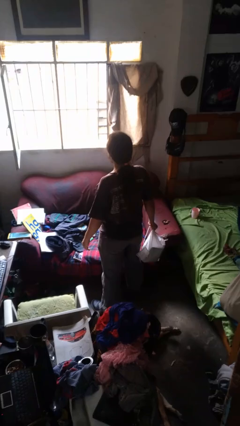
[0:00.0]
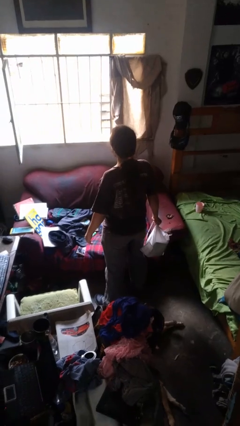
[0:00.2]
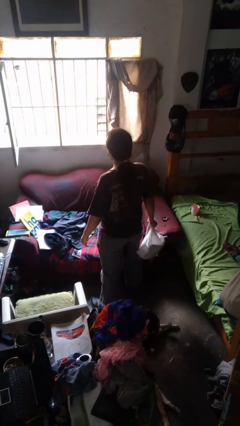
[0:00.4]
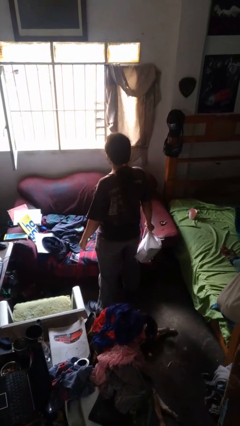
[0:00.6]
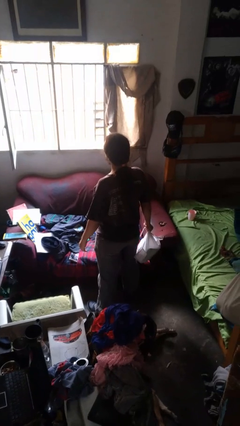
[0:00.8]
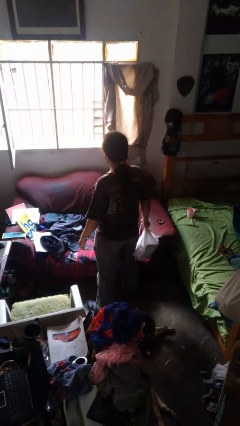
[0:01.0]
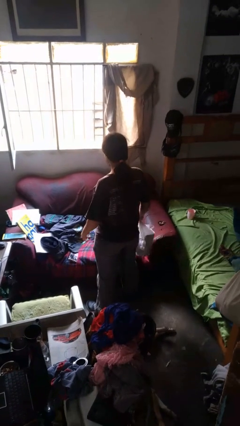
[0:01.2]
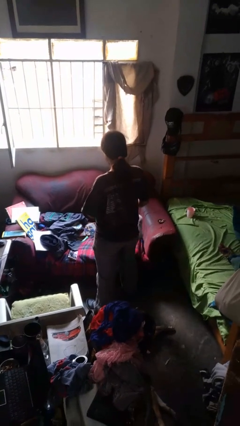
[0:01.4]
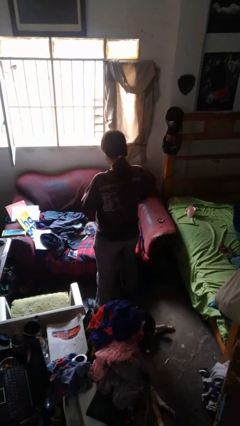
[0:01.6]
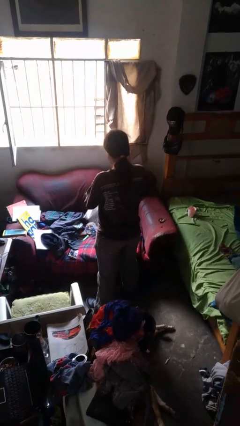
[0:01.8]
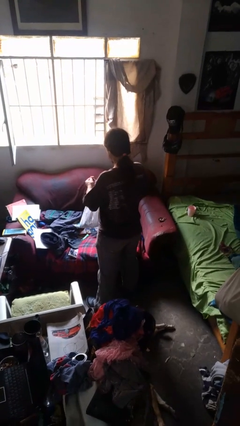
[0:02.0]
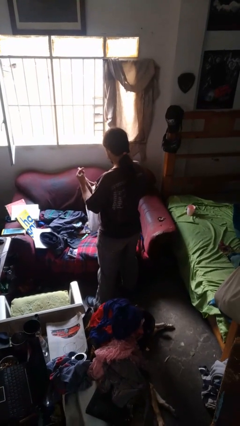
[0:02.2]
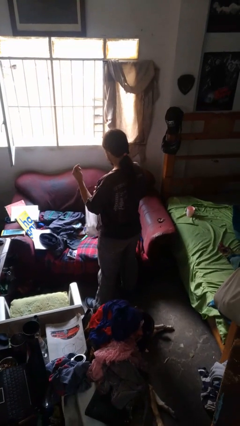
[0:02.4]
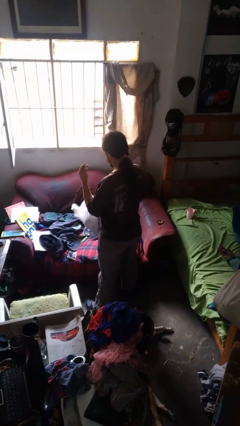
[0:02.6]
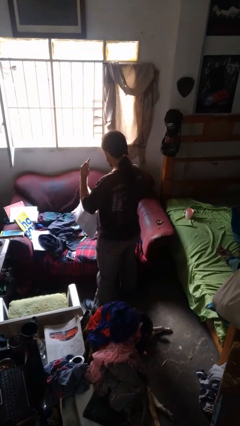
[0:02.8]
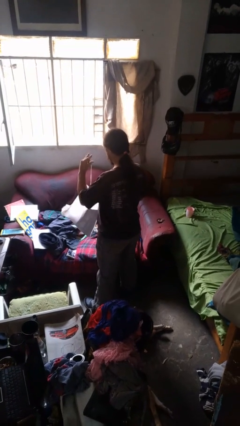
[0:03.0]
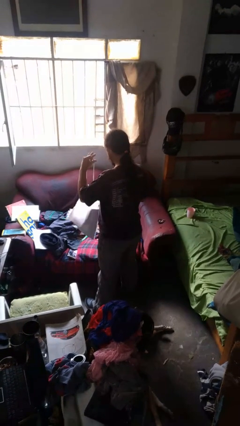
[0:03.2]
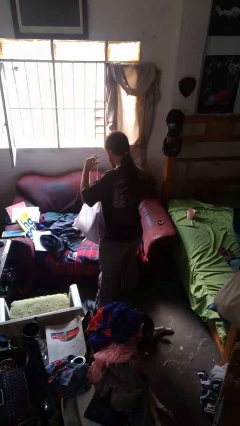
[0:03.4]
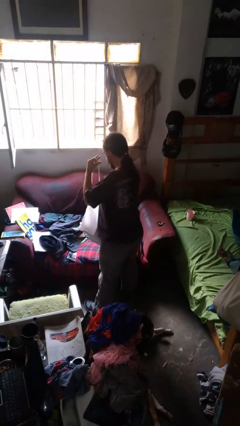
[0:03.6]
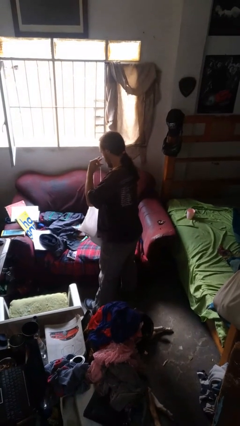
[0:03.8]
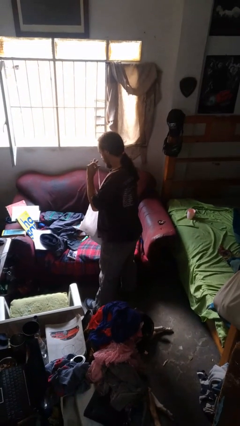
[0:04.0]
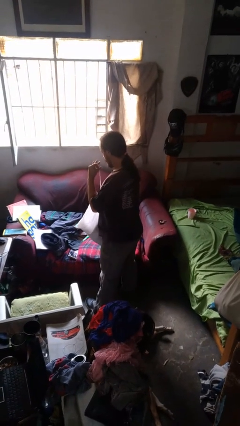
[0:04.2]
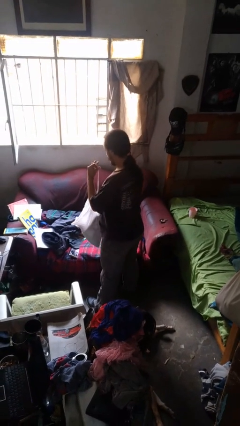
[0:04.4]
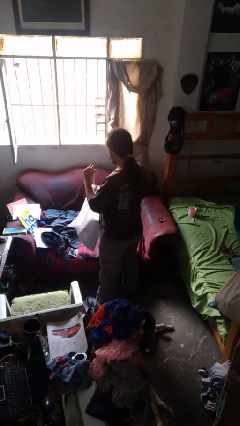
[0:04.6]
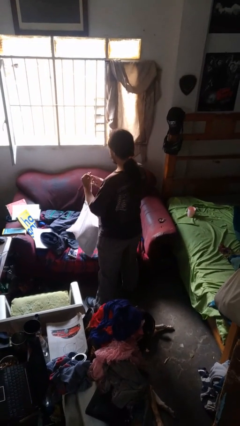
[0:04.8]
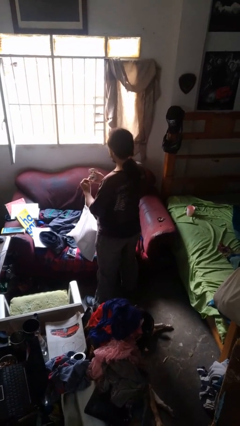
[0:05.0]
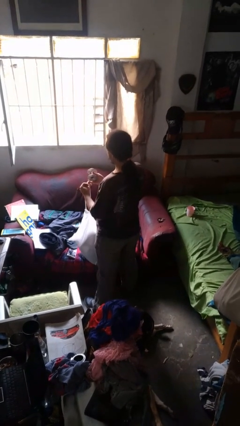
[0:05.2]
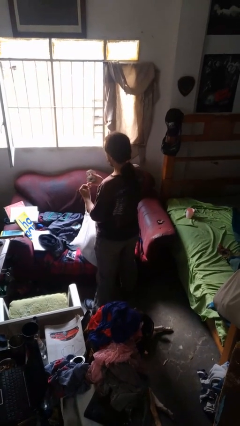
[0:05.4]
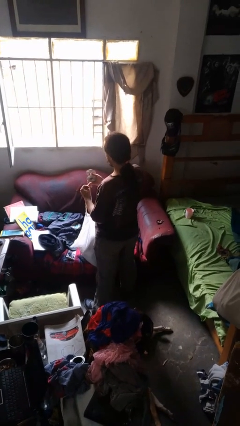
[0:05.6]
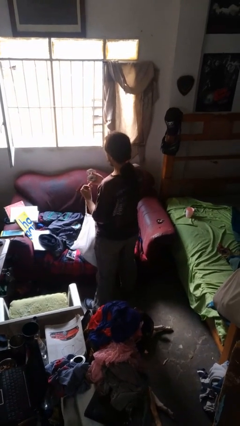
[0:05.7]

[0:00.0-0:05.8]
person takes object from bag

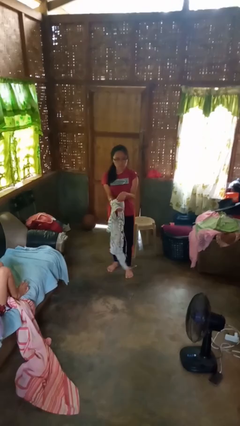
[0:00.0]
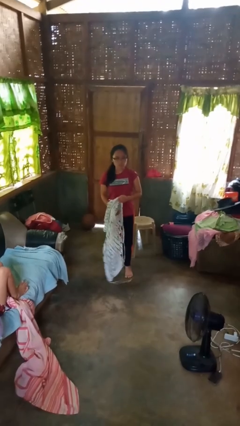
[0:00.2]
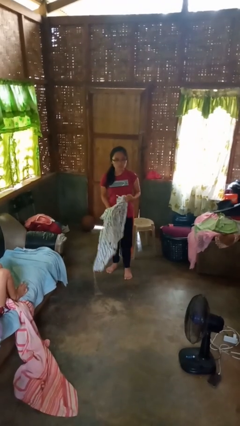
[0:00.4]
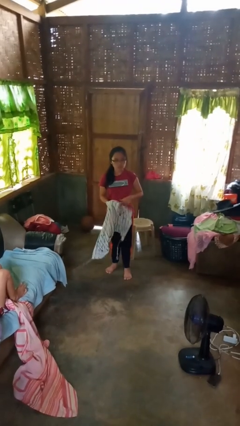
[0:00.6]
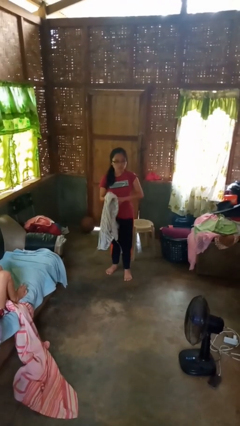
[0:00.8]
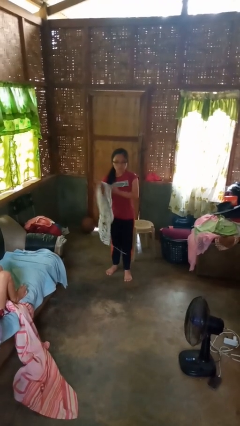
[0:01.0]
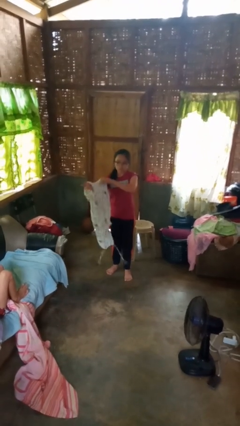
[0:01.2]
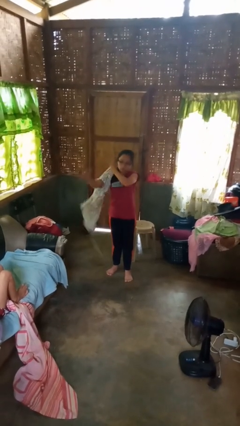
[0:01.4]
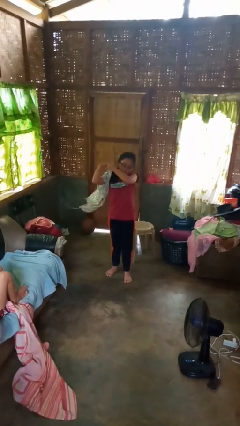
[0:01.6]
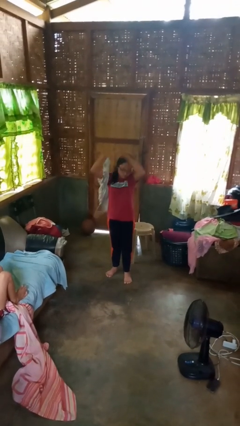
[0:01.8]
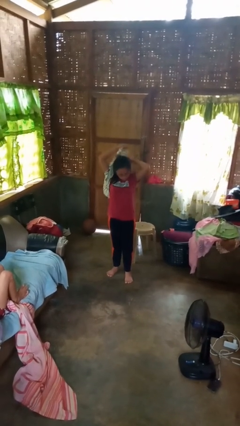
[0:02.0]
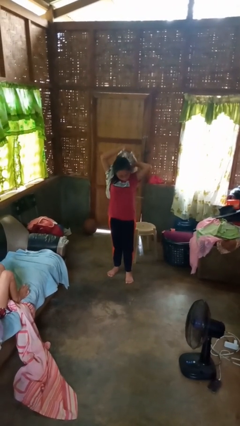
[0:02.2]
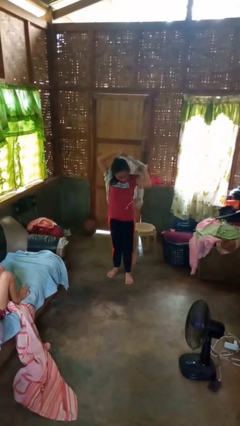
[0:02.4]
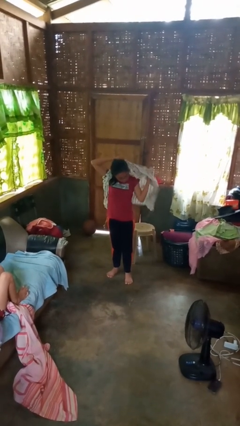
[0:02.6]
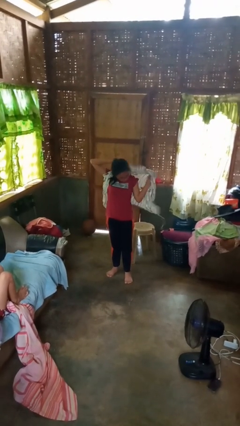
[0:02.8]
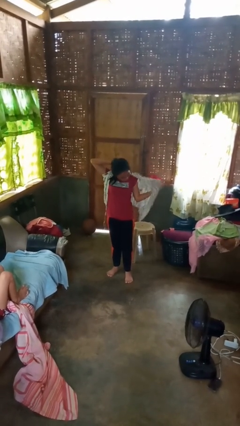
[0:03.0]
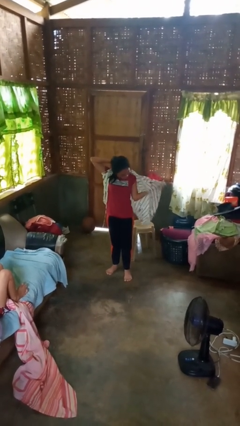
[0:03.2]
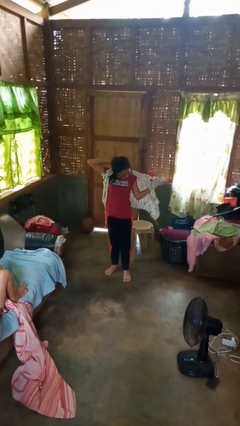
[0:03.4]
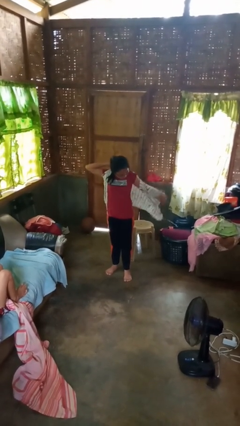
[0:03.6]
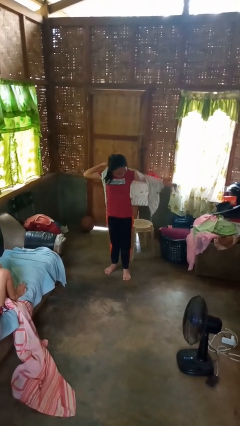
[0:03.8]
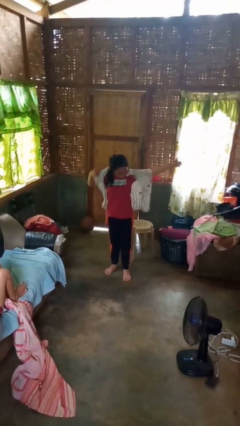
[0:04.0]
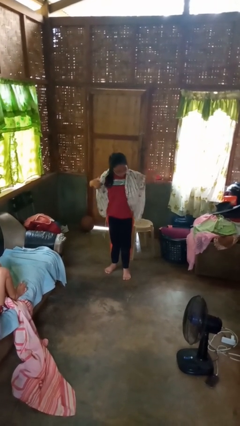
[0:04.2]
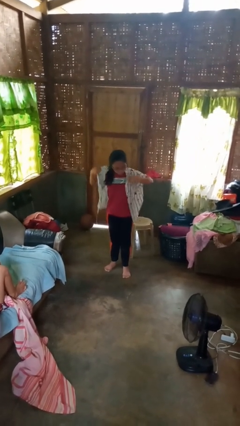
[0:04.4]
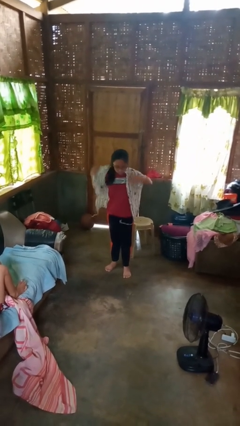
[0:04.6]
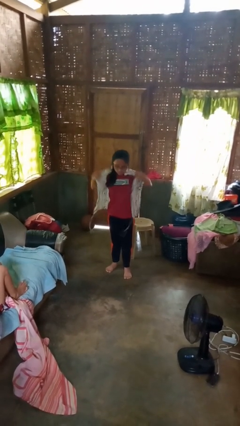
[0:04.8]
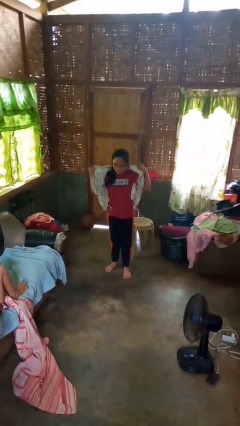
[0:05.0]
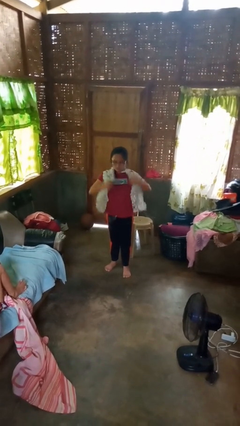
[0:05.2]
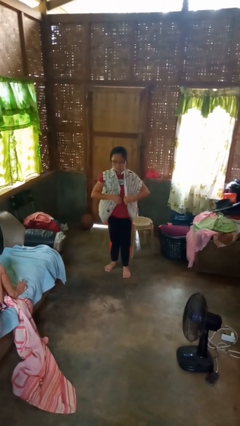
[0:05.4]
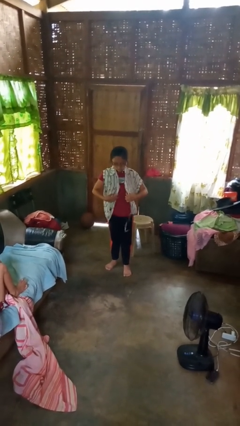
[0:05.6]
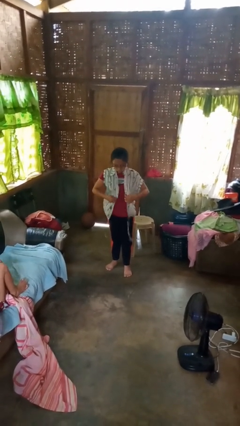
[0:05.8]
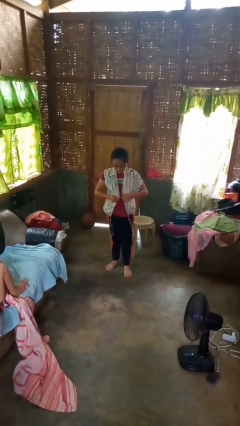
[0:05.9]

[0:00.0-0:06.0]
person puts on shirt

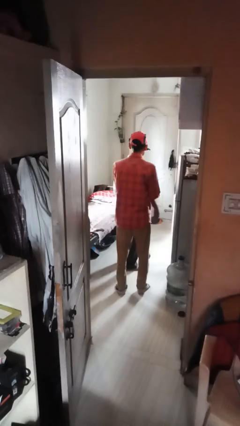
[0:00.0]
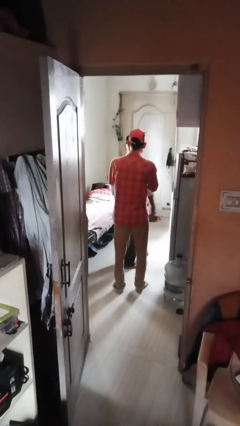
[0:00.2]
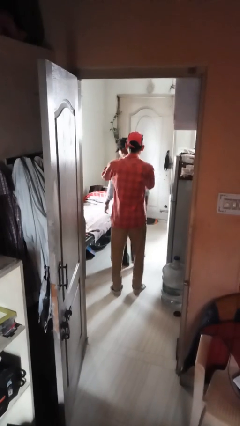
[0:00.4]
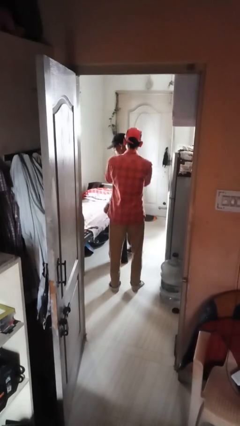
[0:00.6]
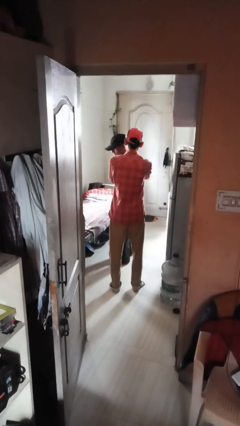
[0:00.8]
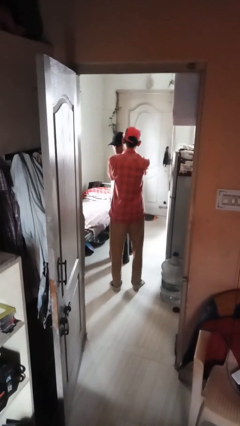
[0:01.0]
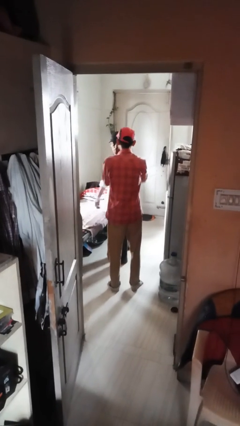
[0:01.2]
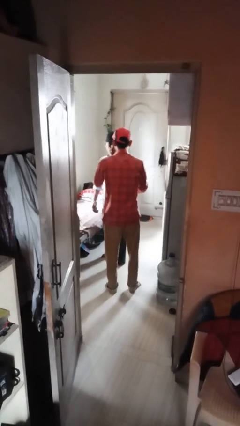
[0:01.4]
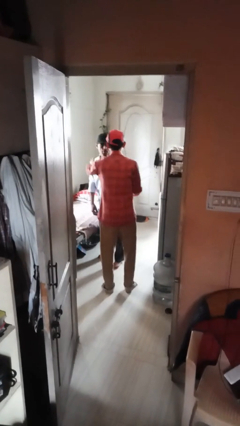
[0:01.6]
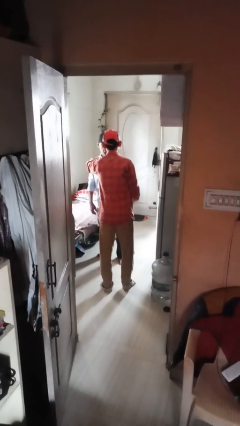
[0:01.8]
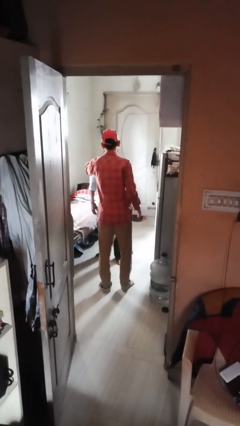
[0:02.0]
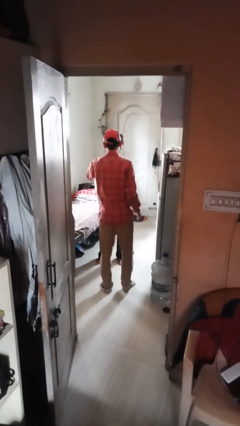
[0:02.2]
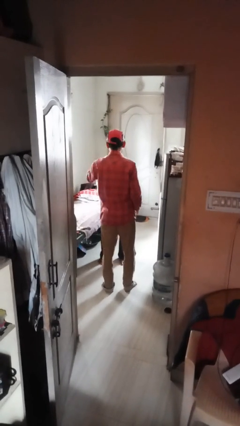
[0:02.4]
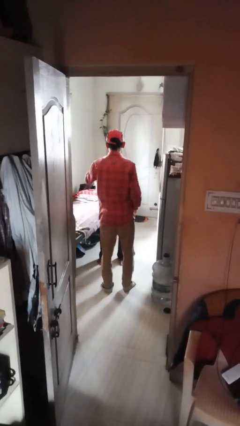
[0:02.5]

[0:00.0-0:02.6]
person grabs person by shoulder

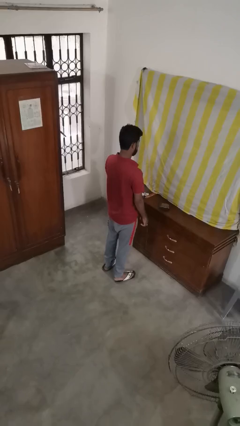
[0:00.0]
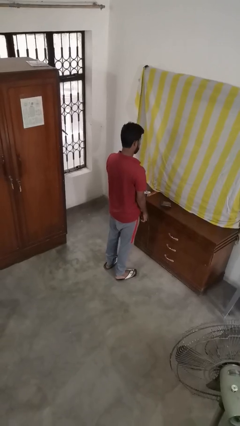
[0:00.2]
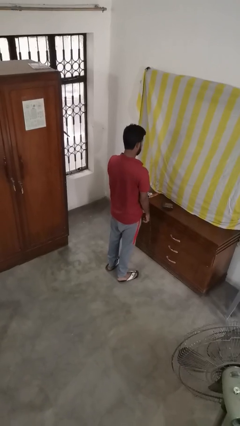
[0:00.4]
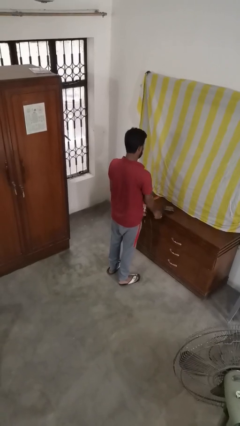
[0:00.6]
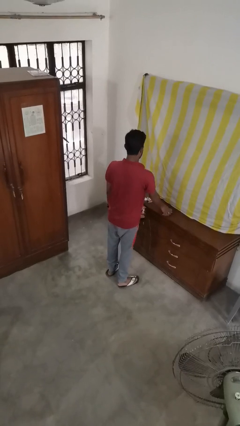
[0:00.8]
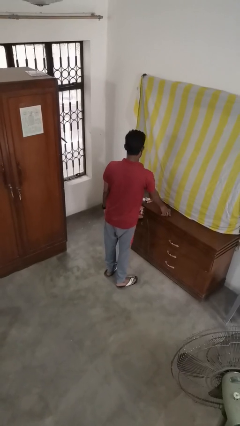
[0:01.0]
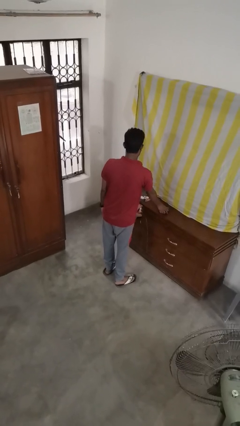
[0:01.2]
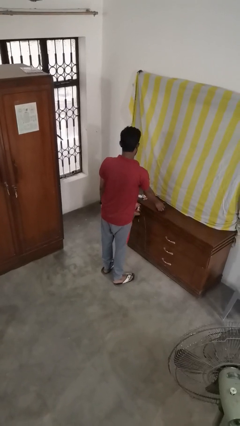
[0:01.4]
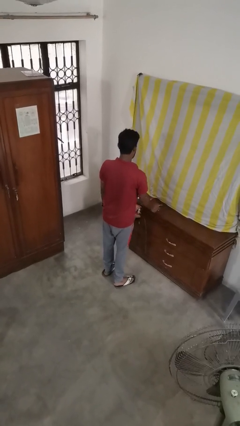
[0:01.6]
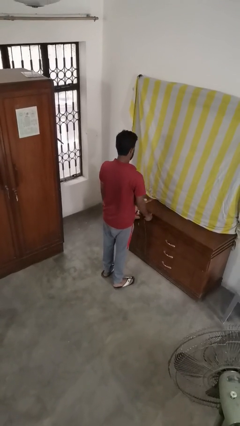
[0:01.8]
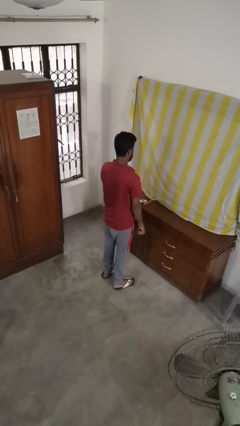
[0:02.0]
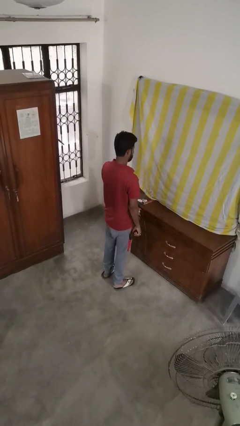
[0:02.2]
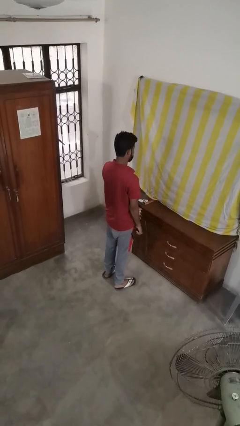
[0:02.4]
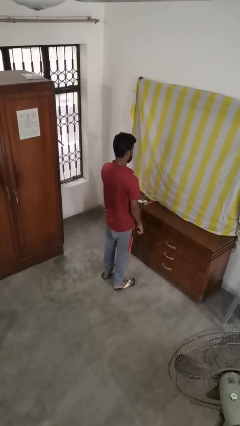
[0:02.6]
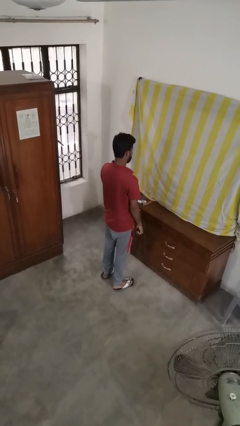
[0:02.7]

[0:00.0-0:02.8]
person picks up object from table

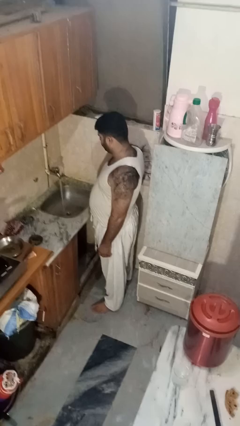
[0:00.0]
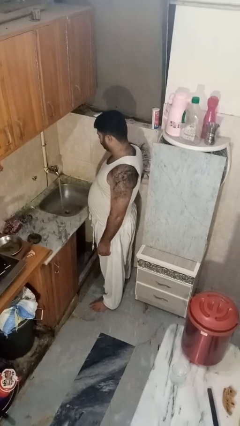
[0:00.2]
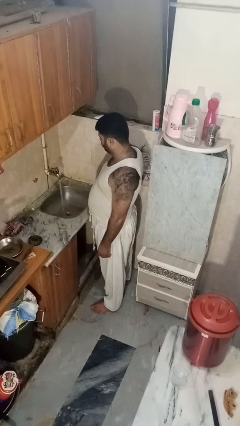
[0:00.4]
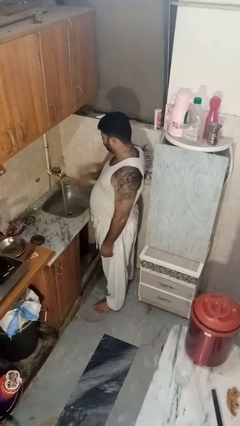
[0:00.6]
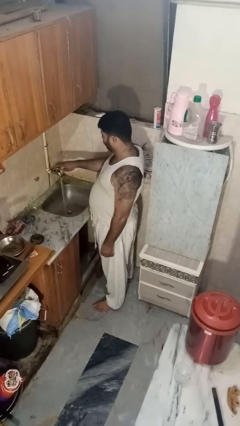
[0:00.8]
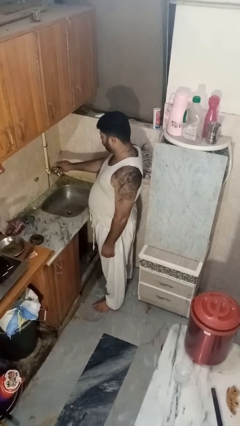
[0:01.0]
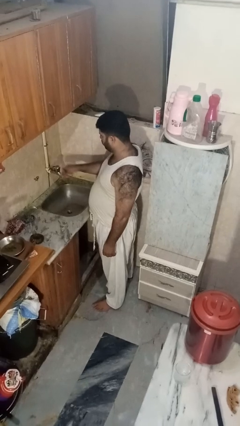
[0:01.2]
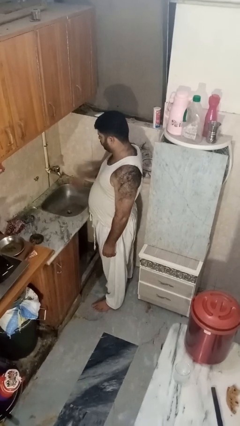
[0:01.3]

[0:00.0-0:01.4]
person turns off faucet
